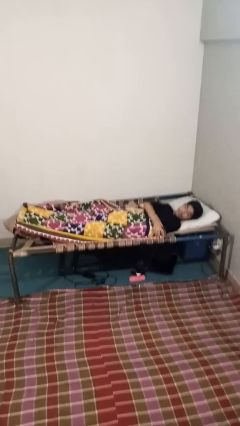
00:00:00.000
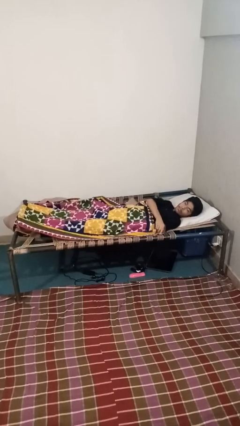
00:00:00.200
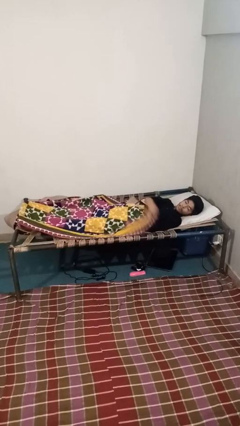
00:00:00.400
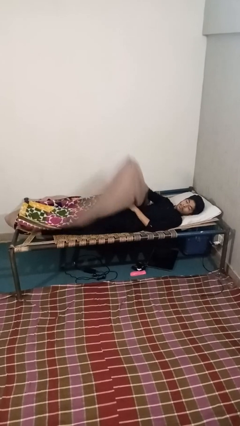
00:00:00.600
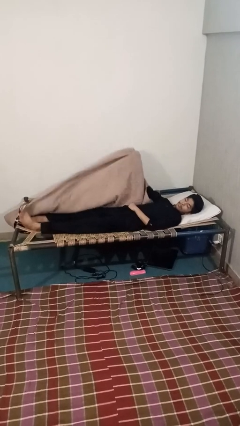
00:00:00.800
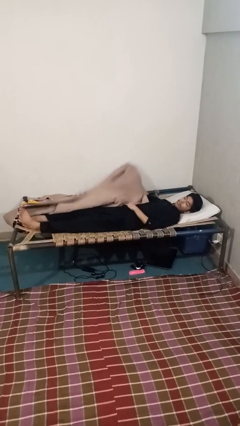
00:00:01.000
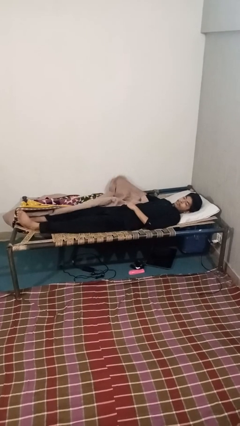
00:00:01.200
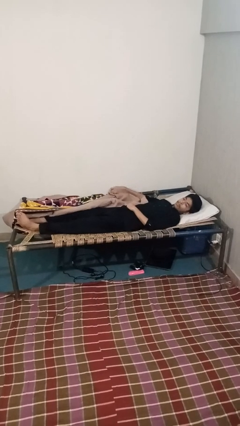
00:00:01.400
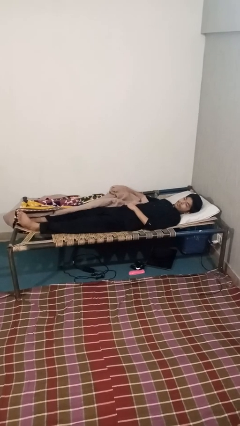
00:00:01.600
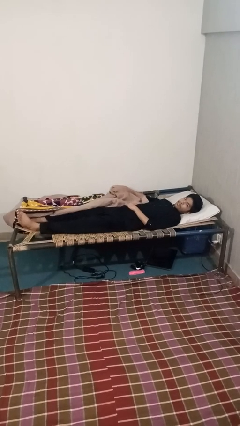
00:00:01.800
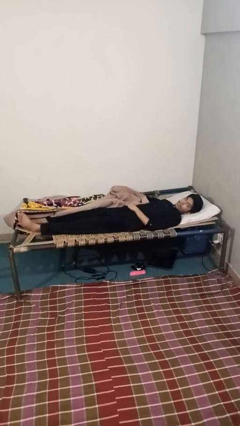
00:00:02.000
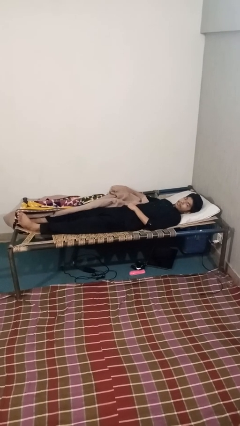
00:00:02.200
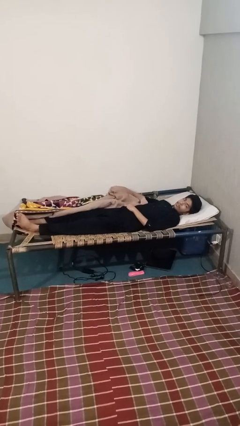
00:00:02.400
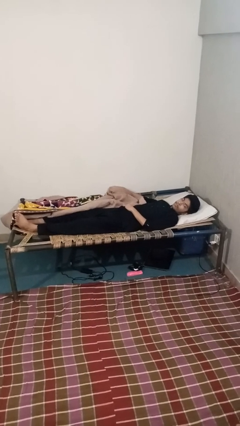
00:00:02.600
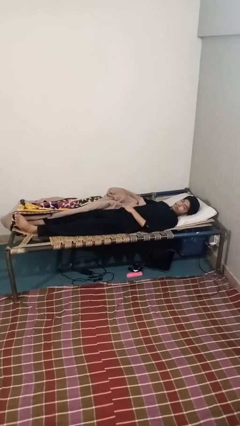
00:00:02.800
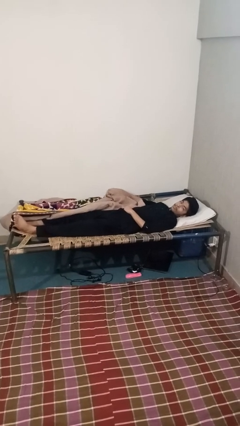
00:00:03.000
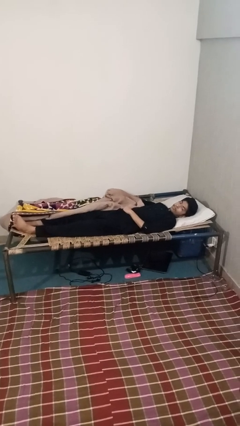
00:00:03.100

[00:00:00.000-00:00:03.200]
person uncovers with bedsheets

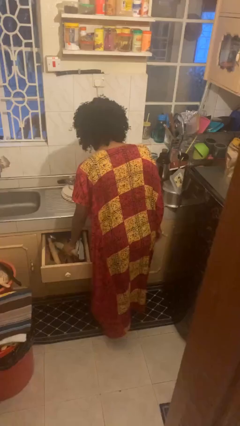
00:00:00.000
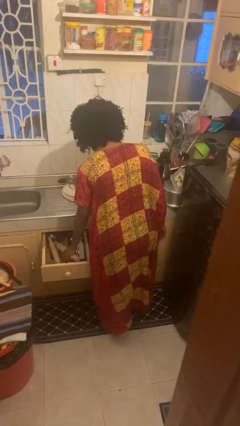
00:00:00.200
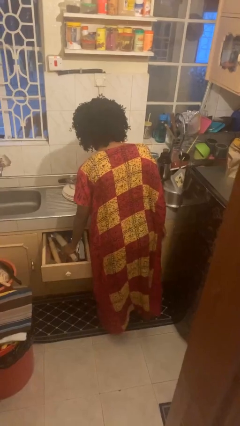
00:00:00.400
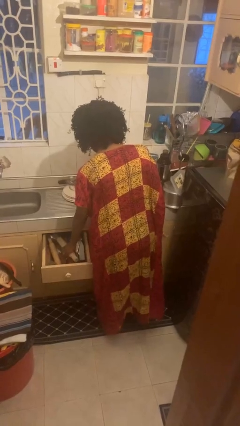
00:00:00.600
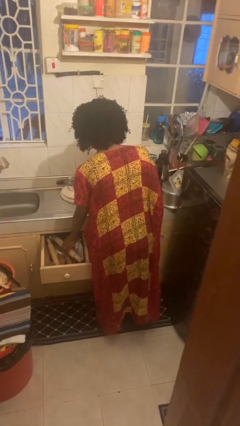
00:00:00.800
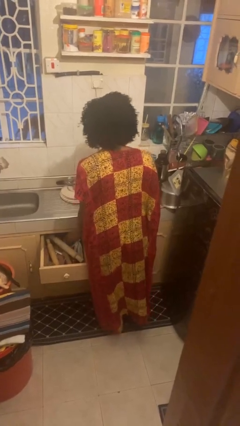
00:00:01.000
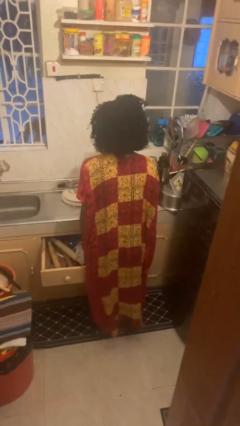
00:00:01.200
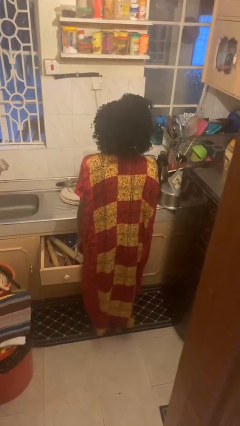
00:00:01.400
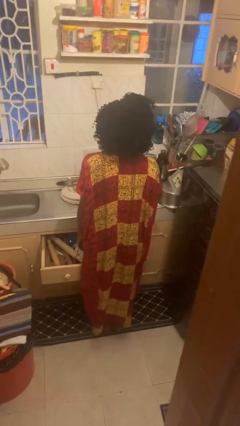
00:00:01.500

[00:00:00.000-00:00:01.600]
person puts object into kitchen drawer

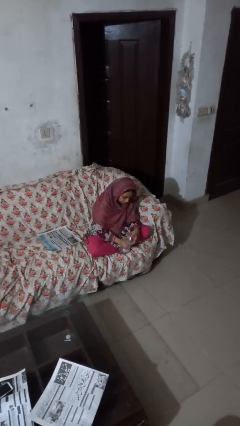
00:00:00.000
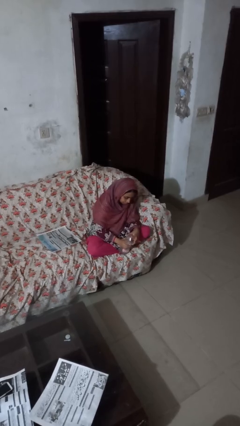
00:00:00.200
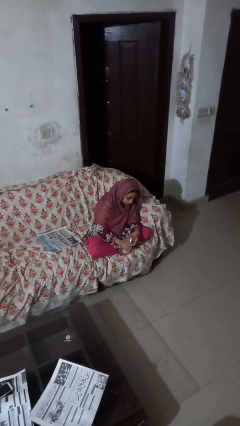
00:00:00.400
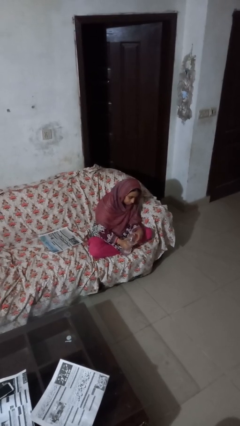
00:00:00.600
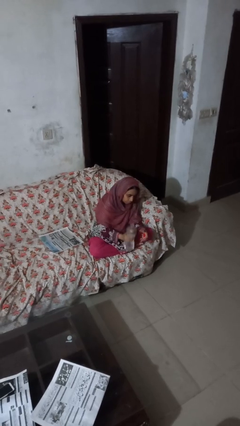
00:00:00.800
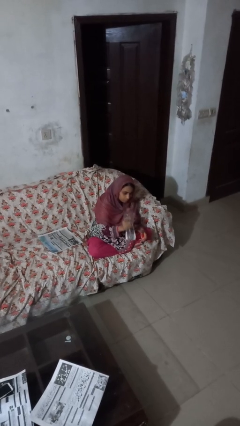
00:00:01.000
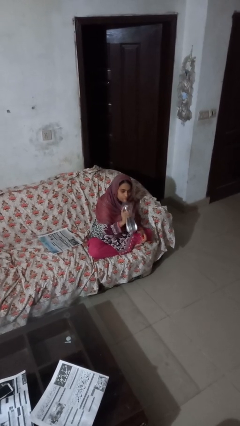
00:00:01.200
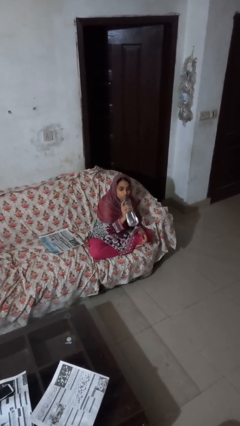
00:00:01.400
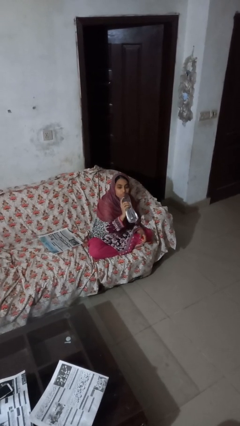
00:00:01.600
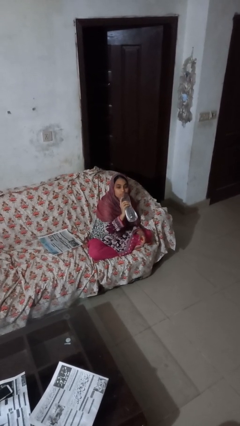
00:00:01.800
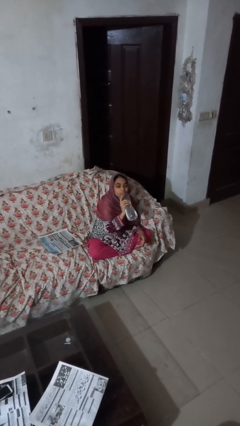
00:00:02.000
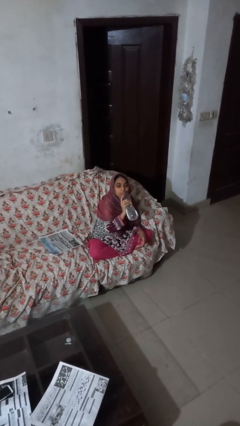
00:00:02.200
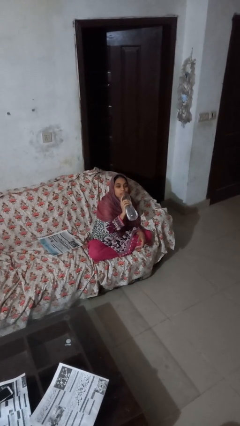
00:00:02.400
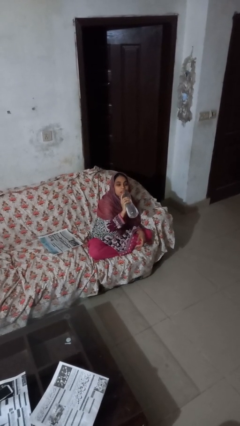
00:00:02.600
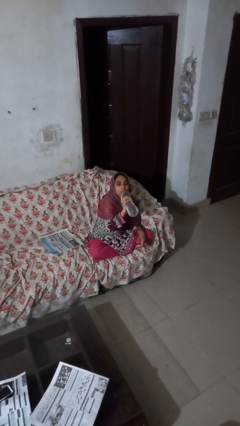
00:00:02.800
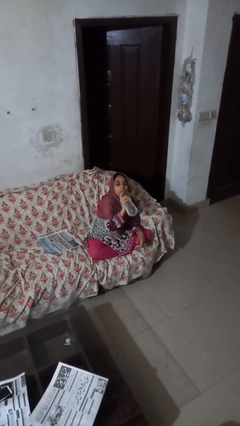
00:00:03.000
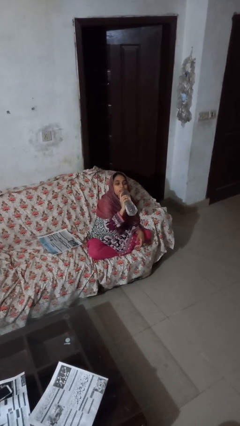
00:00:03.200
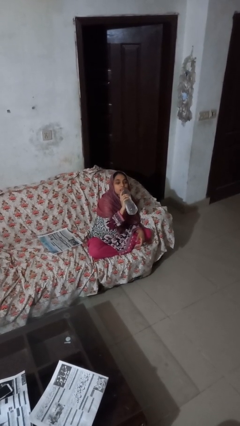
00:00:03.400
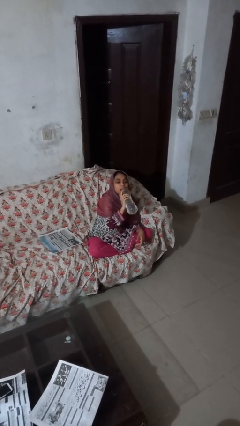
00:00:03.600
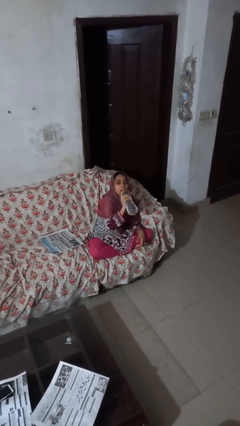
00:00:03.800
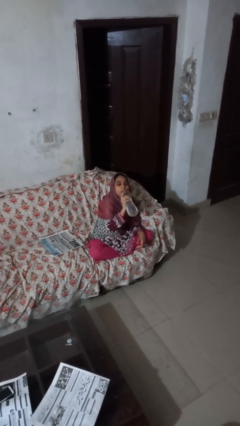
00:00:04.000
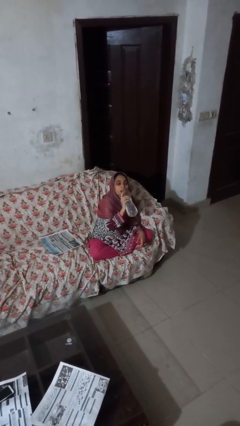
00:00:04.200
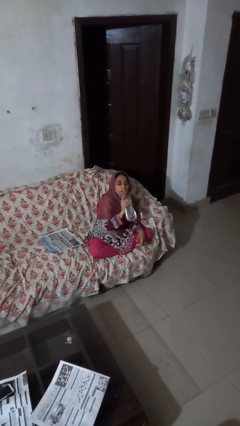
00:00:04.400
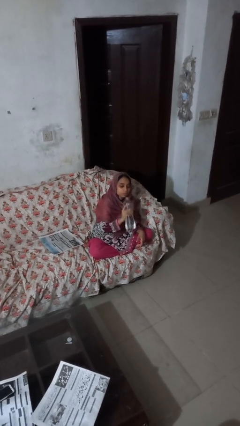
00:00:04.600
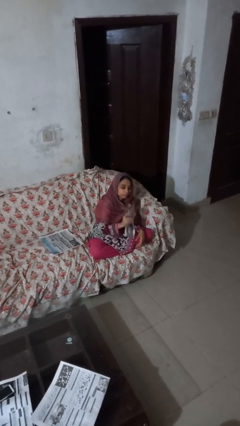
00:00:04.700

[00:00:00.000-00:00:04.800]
person drinks from bottle

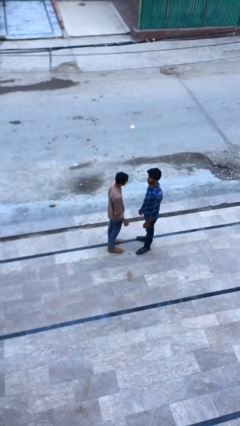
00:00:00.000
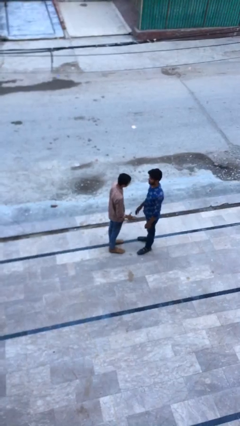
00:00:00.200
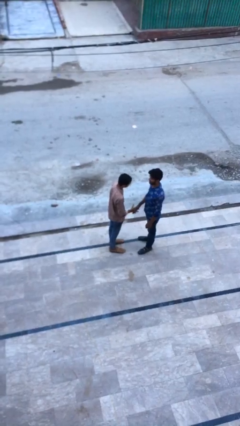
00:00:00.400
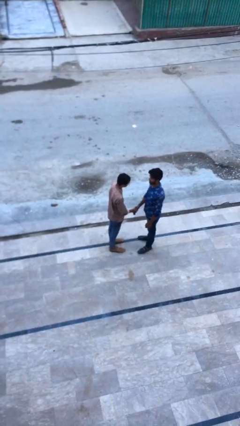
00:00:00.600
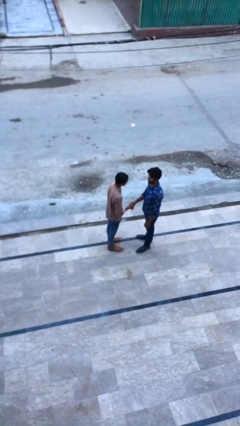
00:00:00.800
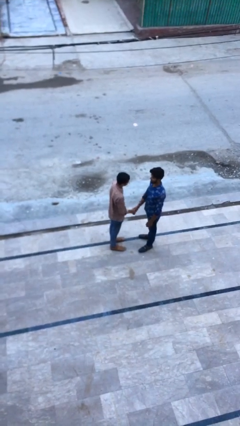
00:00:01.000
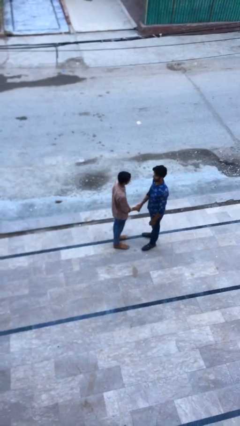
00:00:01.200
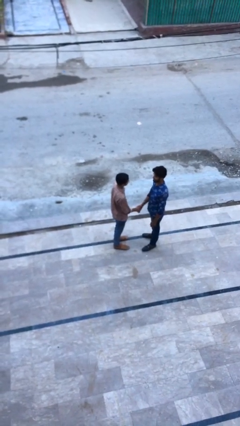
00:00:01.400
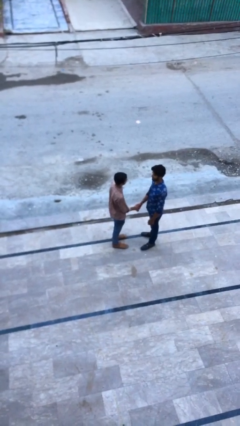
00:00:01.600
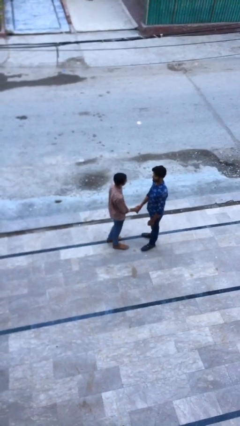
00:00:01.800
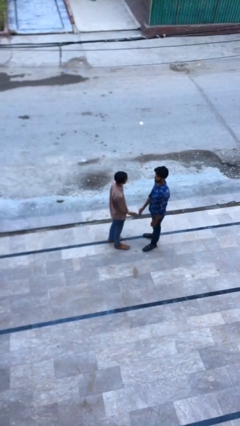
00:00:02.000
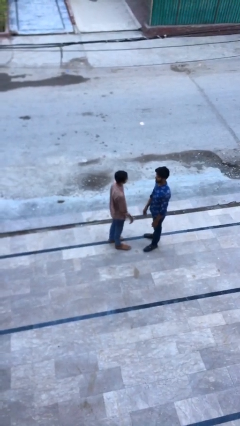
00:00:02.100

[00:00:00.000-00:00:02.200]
person shakes hand

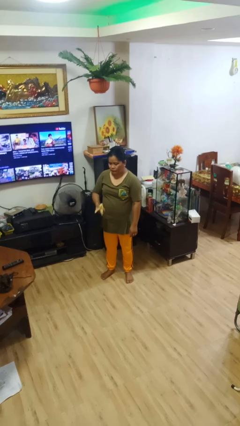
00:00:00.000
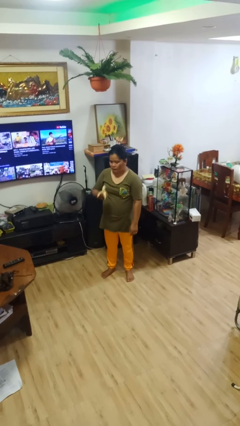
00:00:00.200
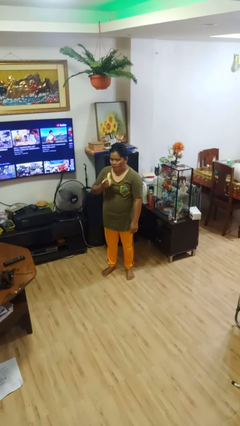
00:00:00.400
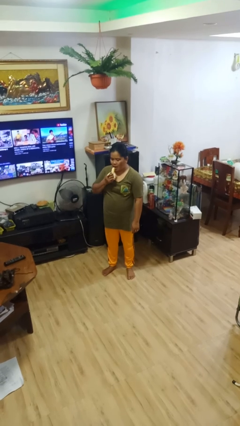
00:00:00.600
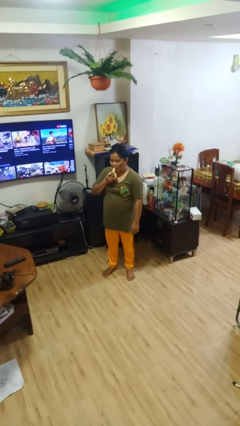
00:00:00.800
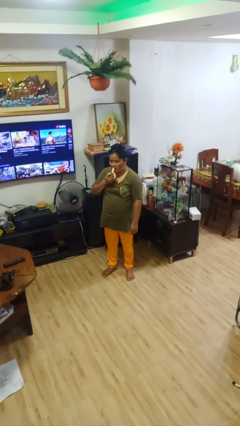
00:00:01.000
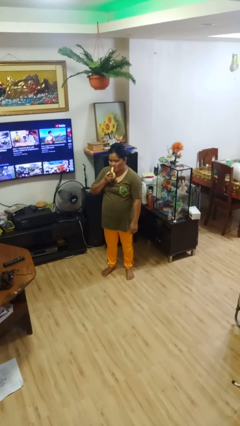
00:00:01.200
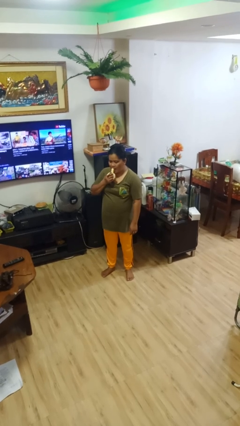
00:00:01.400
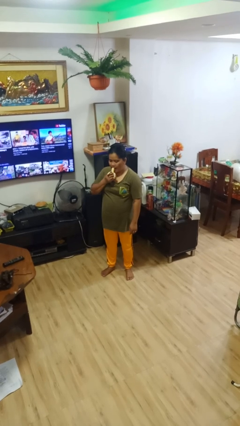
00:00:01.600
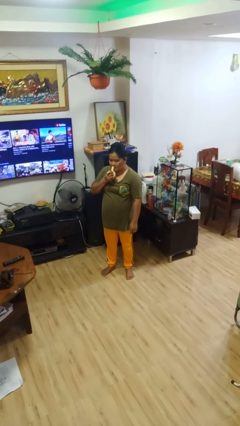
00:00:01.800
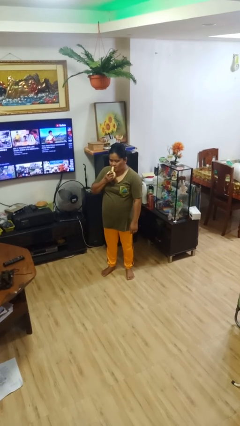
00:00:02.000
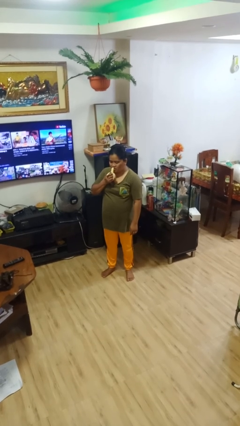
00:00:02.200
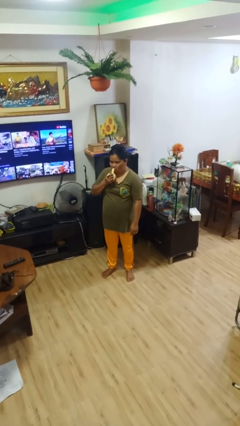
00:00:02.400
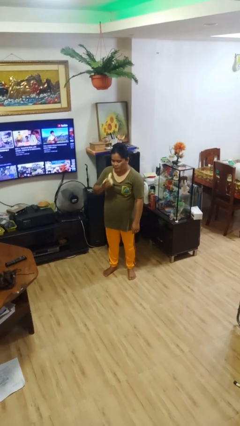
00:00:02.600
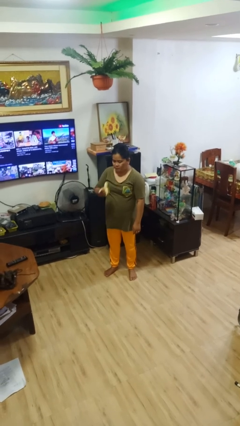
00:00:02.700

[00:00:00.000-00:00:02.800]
person eats banana

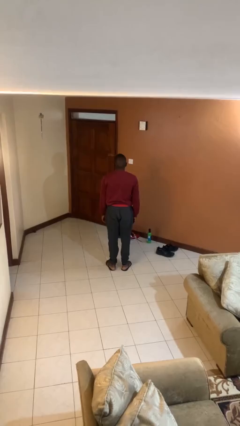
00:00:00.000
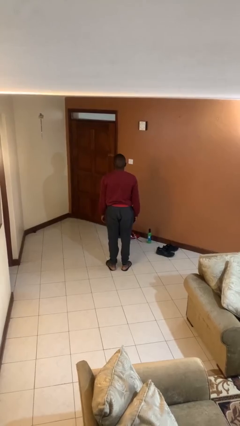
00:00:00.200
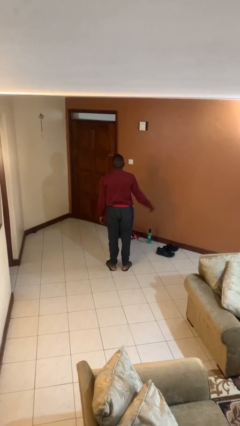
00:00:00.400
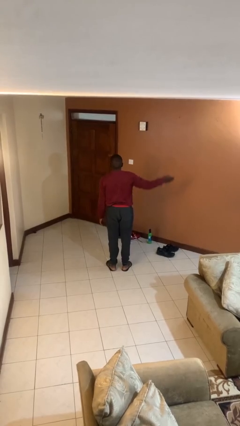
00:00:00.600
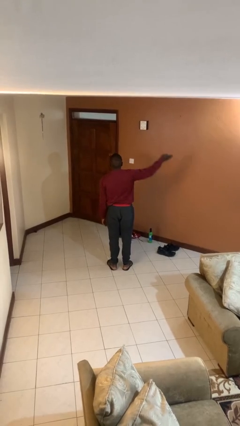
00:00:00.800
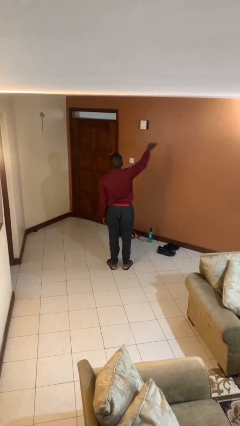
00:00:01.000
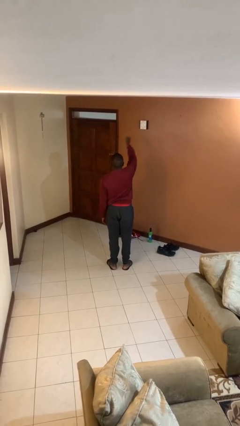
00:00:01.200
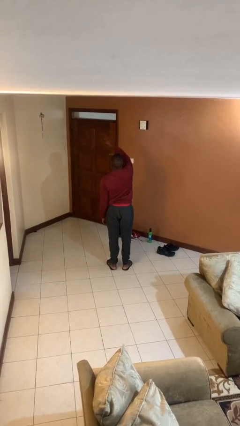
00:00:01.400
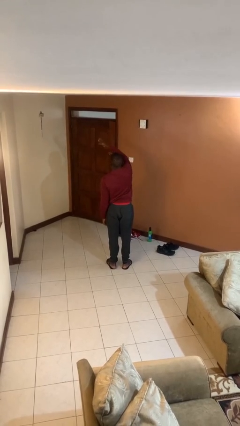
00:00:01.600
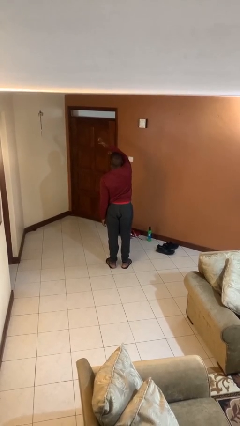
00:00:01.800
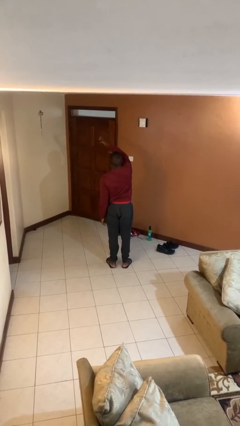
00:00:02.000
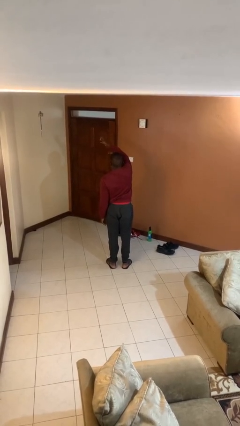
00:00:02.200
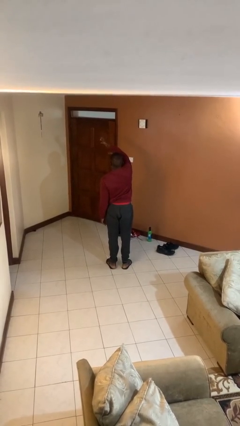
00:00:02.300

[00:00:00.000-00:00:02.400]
person gestures swipe left

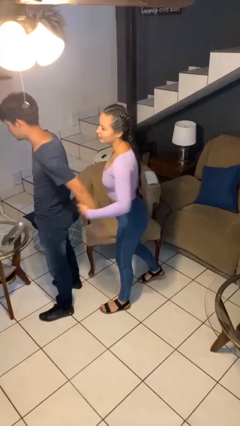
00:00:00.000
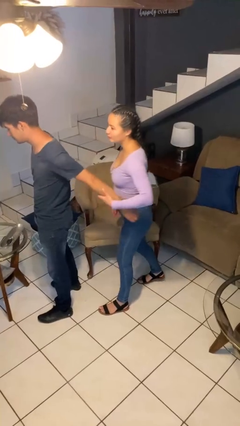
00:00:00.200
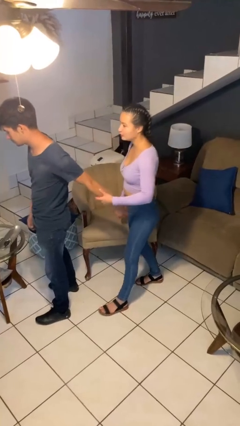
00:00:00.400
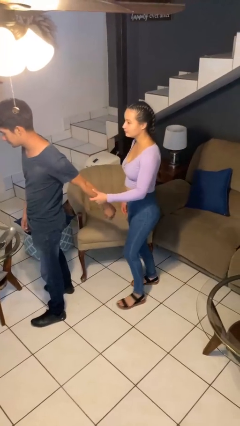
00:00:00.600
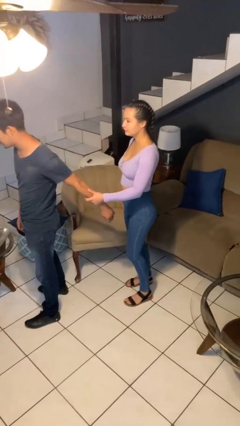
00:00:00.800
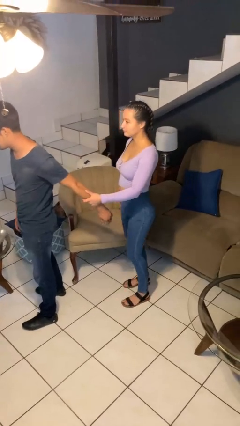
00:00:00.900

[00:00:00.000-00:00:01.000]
person grabs person by forearm
